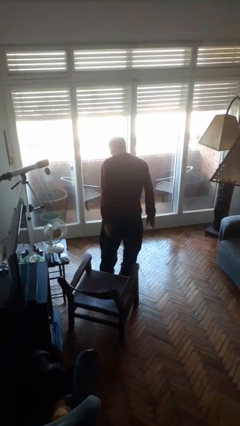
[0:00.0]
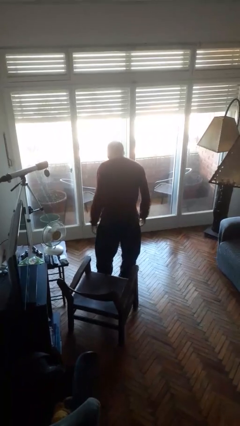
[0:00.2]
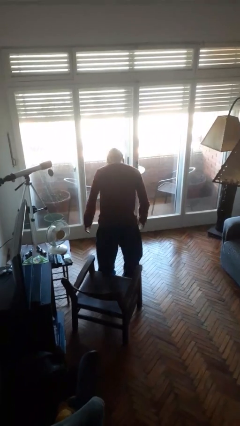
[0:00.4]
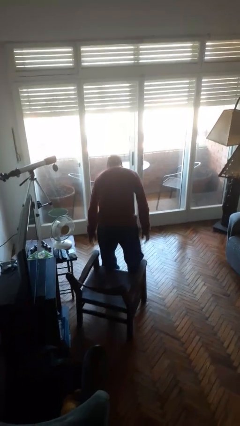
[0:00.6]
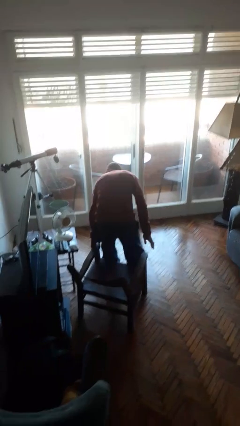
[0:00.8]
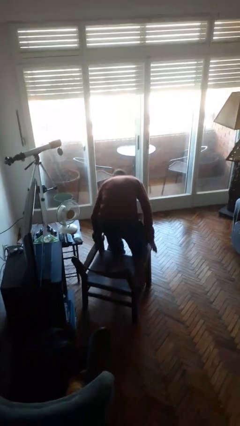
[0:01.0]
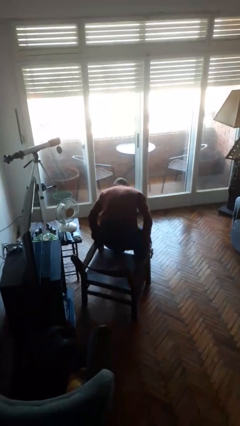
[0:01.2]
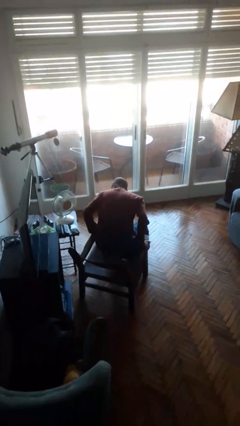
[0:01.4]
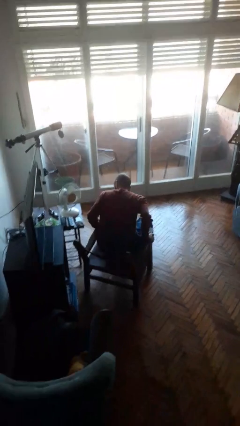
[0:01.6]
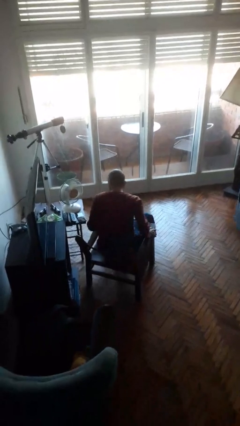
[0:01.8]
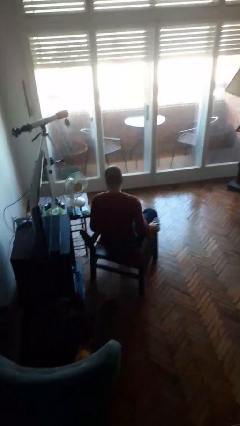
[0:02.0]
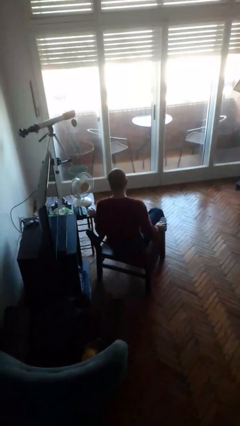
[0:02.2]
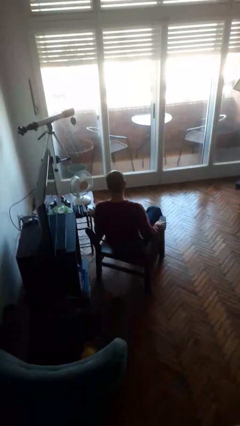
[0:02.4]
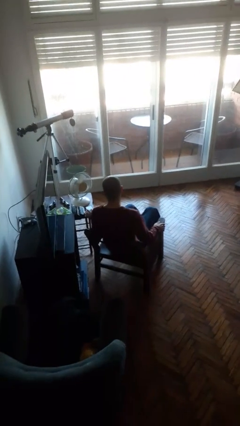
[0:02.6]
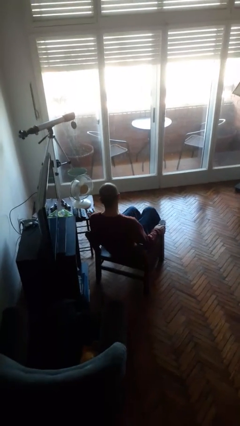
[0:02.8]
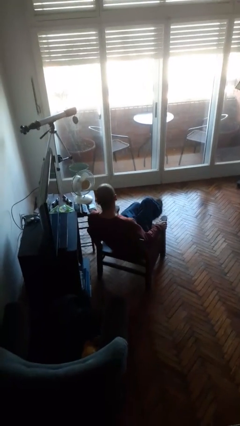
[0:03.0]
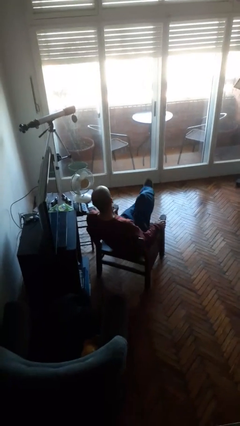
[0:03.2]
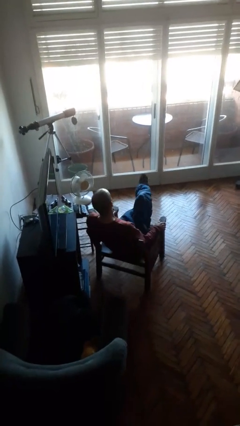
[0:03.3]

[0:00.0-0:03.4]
person sits down

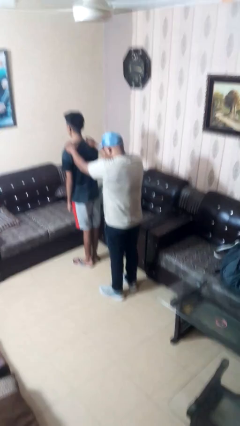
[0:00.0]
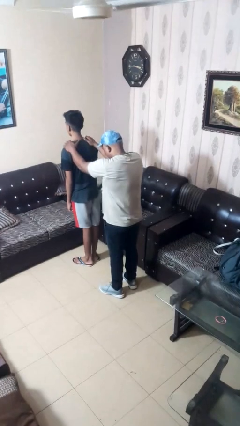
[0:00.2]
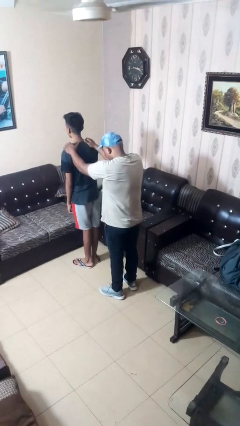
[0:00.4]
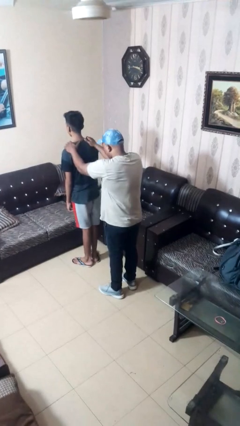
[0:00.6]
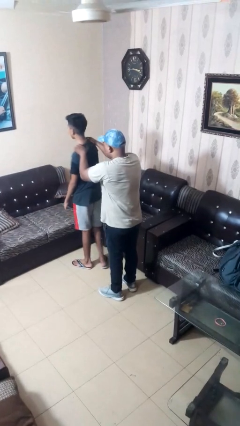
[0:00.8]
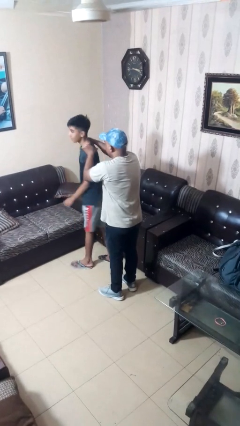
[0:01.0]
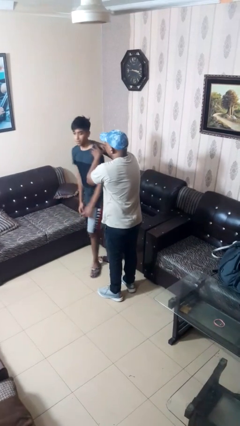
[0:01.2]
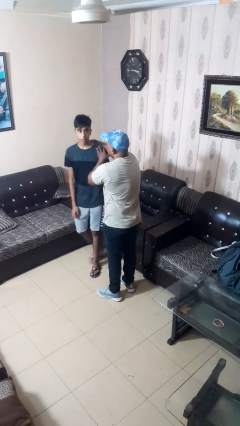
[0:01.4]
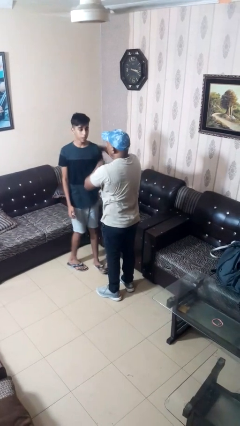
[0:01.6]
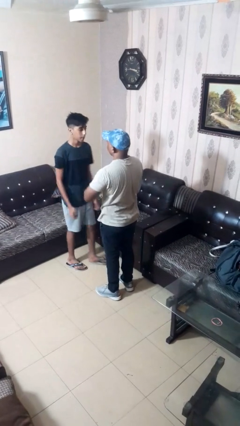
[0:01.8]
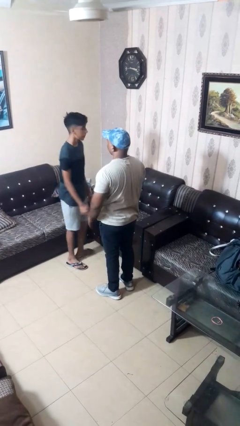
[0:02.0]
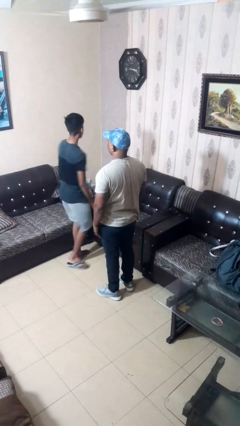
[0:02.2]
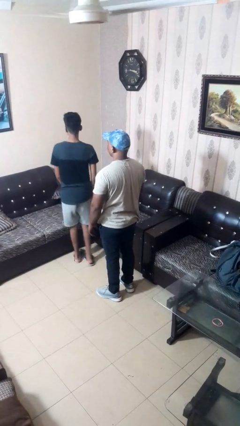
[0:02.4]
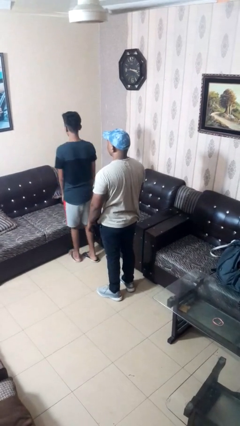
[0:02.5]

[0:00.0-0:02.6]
person spins person around

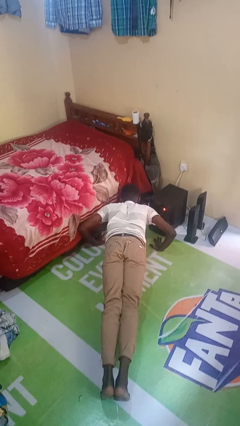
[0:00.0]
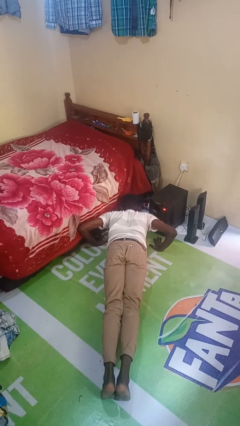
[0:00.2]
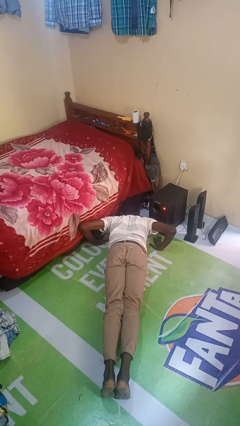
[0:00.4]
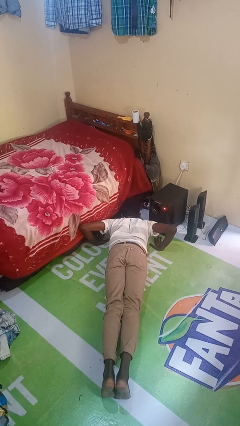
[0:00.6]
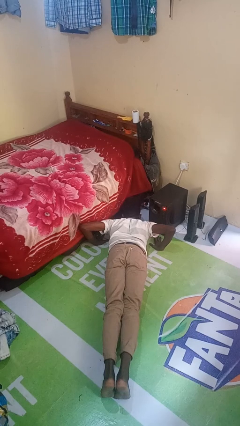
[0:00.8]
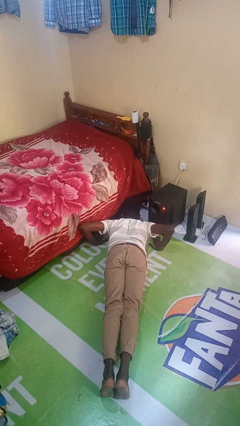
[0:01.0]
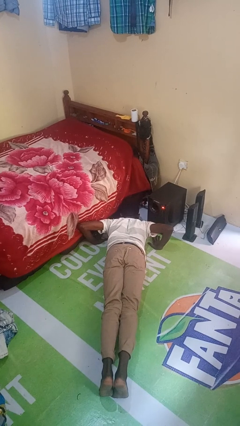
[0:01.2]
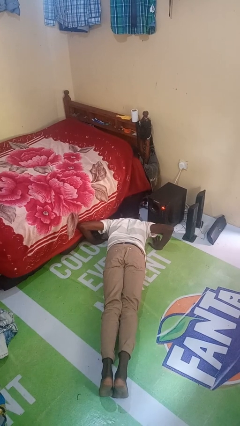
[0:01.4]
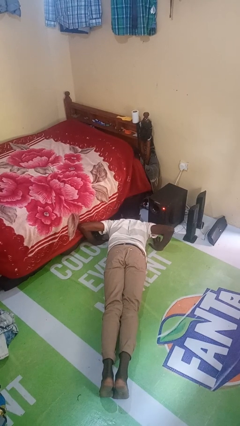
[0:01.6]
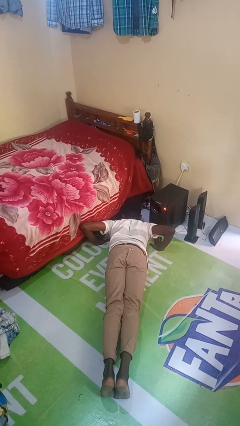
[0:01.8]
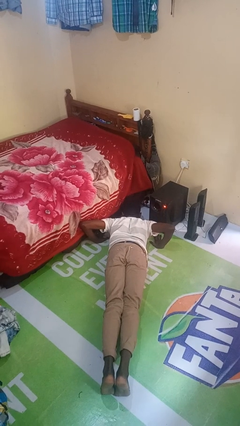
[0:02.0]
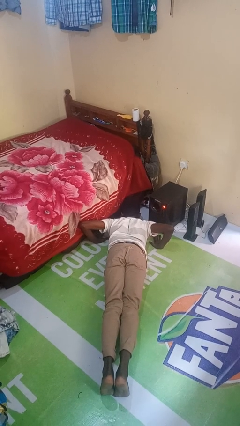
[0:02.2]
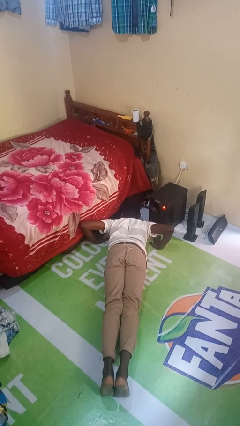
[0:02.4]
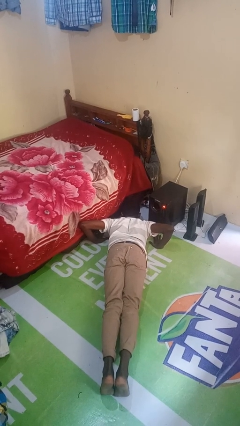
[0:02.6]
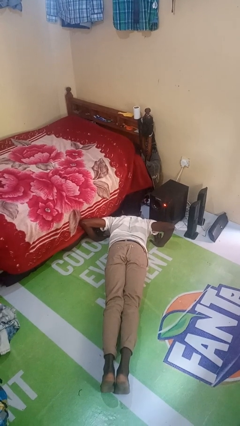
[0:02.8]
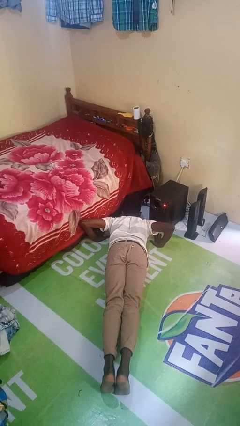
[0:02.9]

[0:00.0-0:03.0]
person exercises with pushup

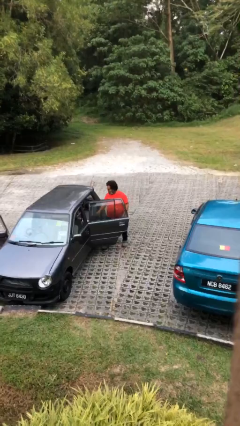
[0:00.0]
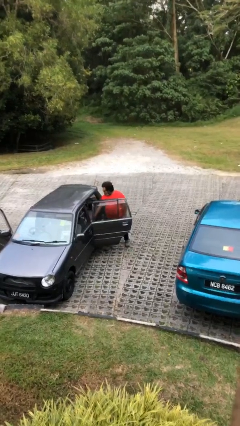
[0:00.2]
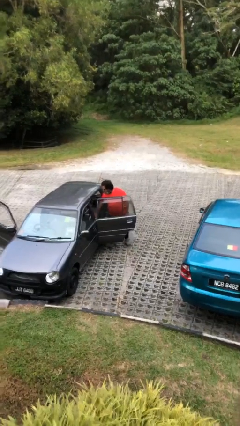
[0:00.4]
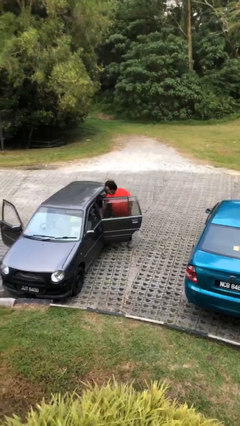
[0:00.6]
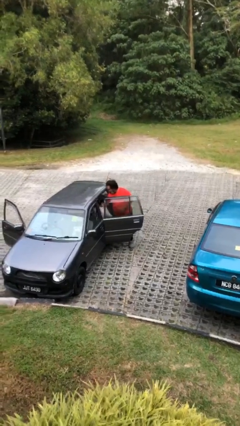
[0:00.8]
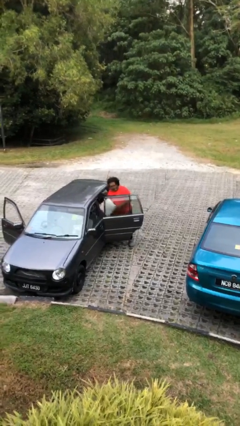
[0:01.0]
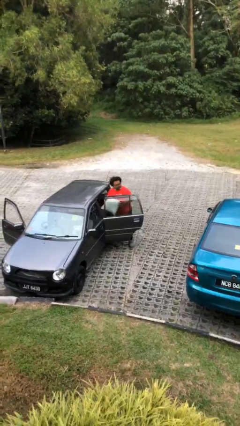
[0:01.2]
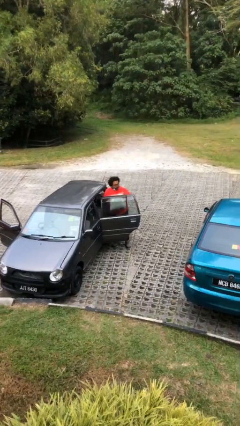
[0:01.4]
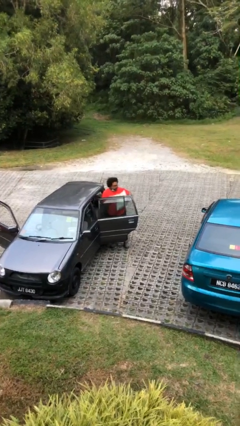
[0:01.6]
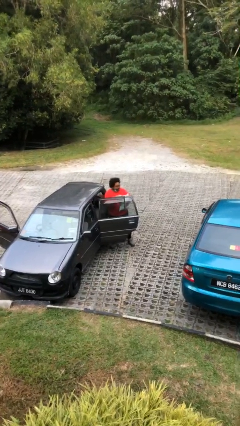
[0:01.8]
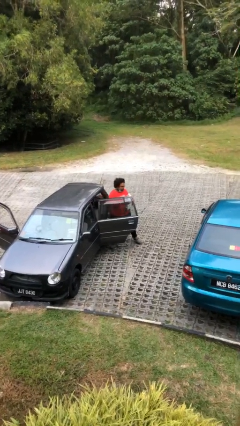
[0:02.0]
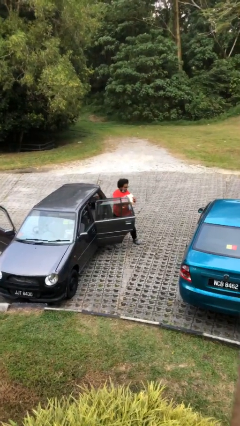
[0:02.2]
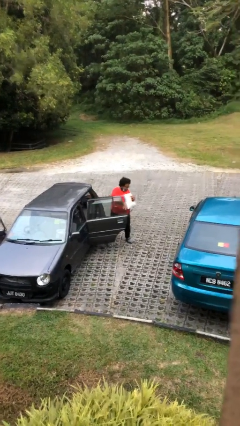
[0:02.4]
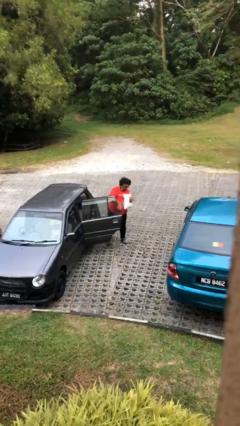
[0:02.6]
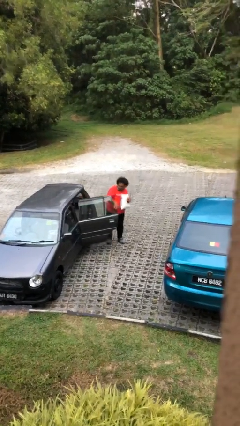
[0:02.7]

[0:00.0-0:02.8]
person unloads car

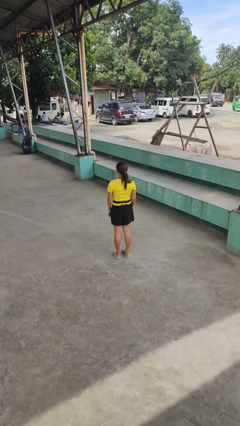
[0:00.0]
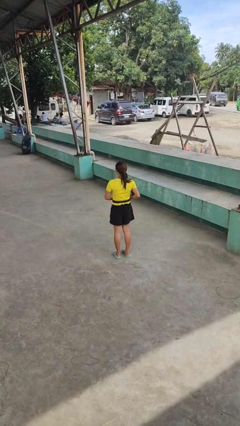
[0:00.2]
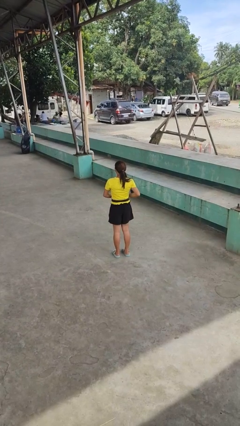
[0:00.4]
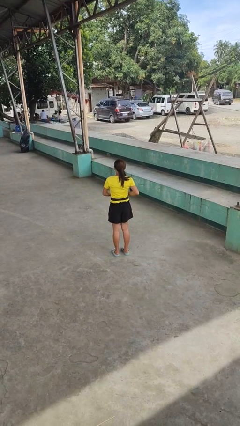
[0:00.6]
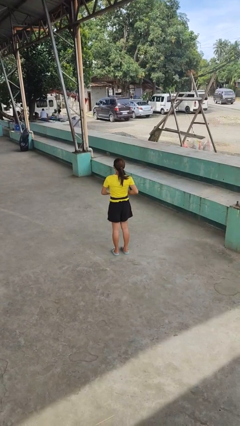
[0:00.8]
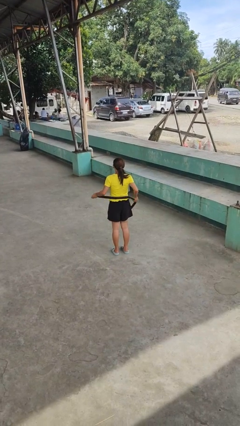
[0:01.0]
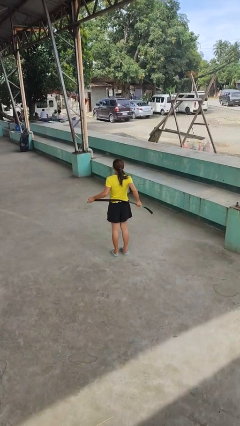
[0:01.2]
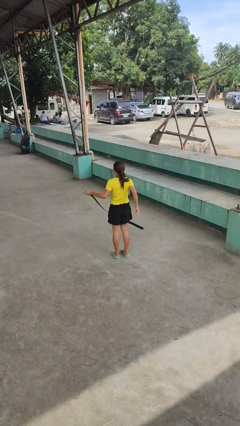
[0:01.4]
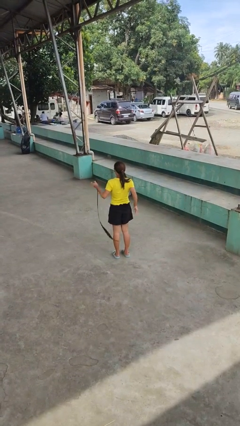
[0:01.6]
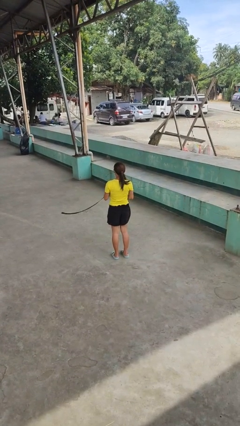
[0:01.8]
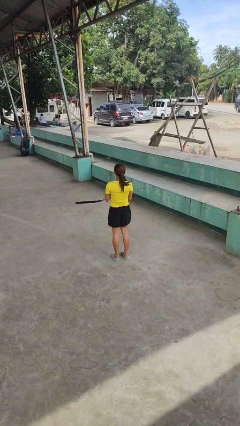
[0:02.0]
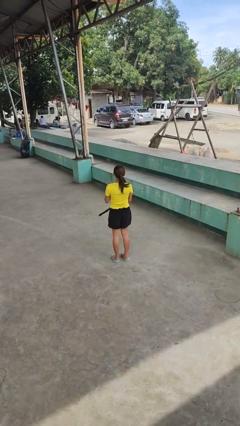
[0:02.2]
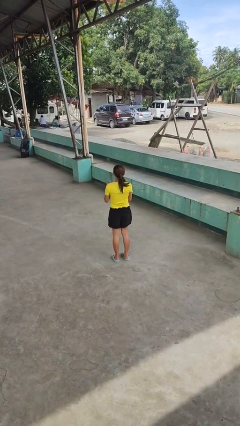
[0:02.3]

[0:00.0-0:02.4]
person takes off belt

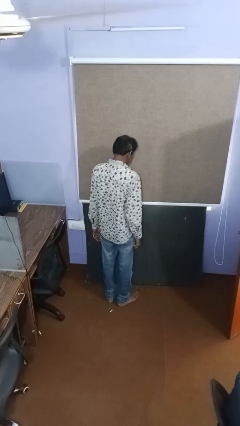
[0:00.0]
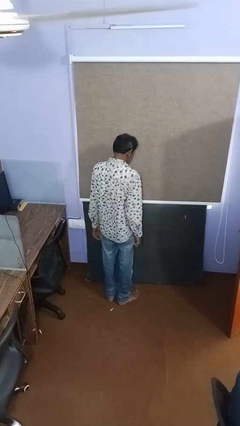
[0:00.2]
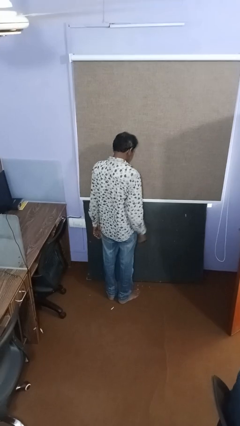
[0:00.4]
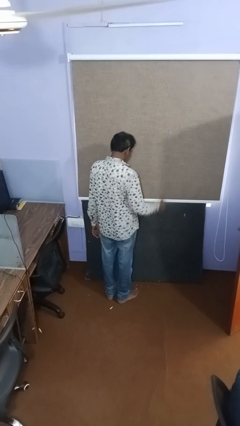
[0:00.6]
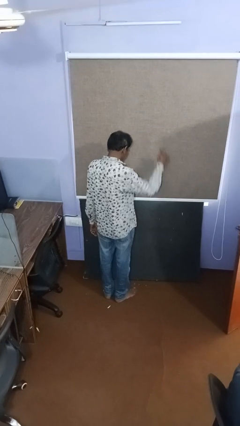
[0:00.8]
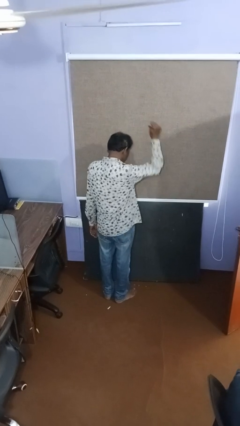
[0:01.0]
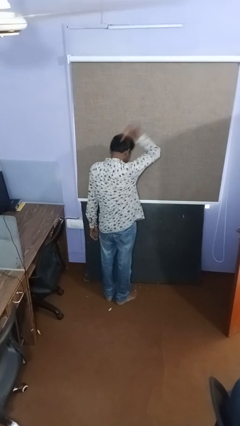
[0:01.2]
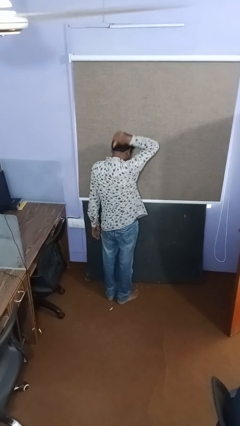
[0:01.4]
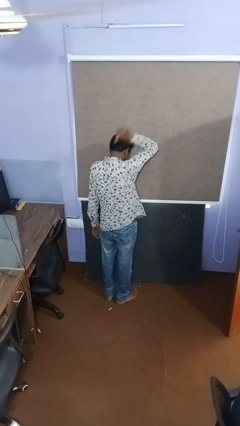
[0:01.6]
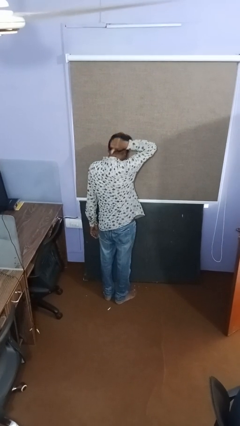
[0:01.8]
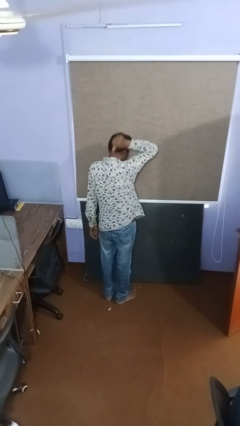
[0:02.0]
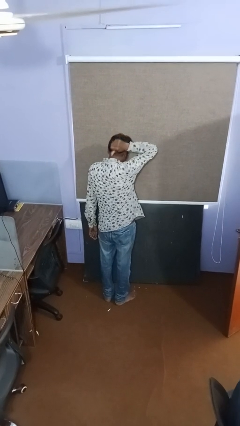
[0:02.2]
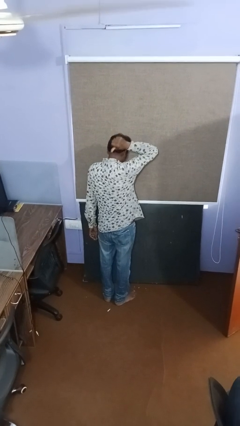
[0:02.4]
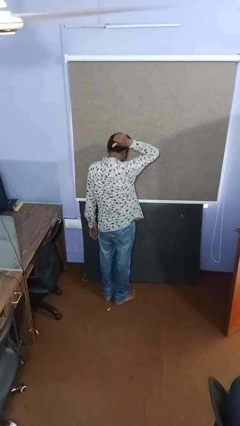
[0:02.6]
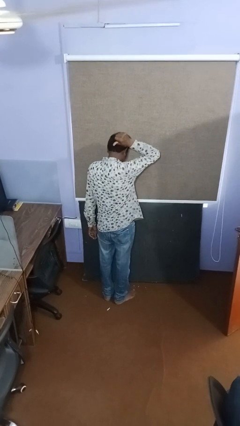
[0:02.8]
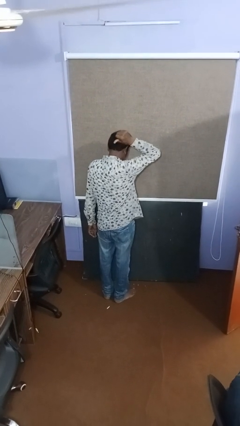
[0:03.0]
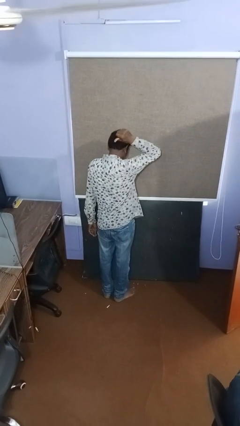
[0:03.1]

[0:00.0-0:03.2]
person gestures thumbs up
